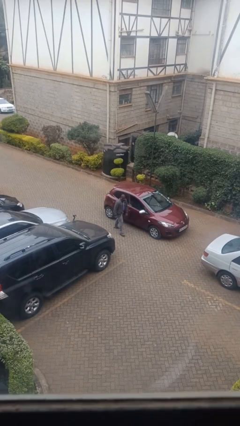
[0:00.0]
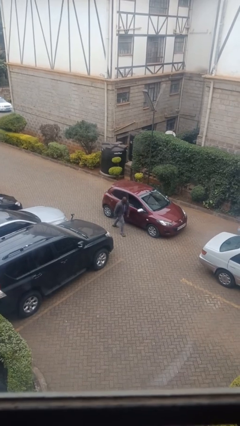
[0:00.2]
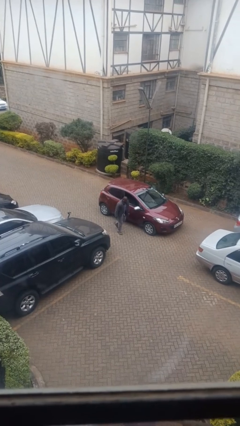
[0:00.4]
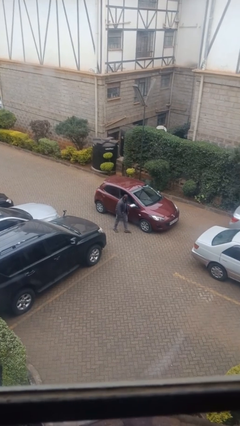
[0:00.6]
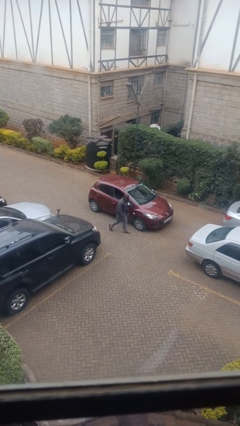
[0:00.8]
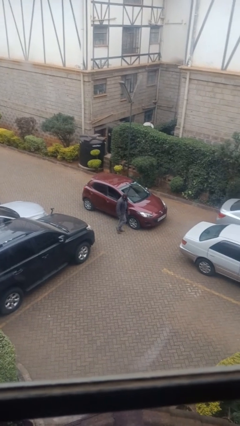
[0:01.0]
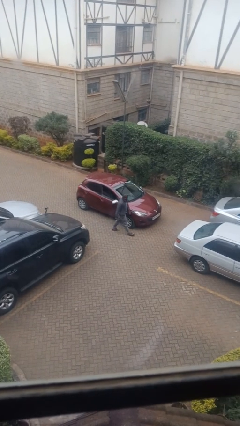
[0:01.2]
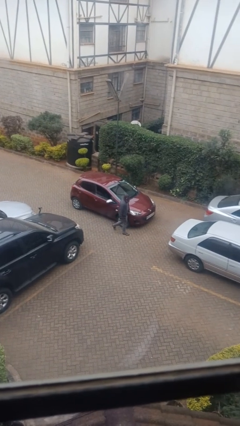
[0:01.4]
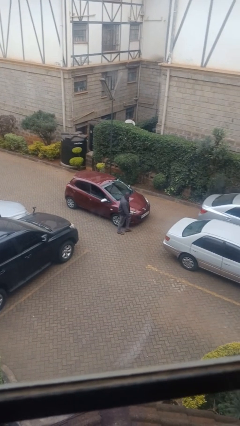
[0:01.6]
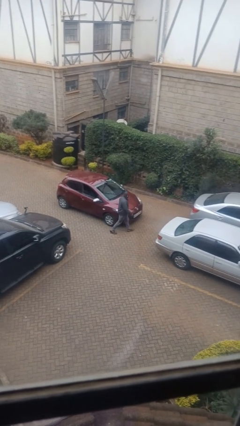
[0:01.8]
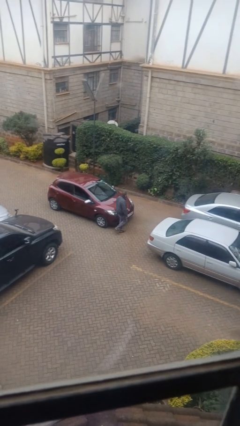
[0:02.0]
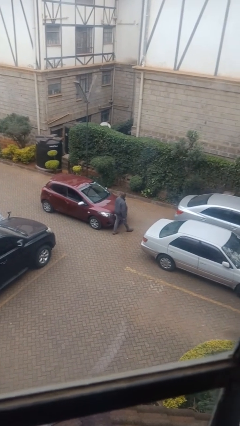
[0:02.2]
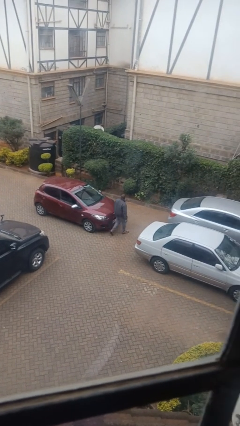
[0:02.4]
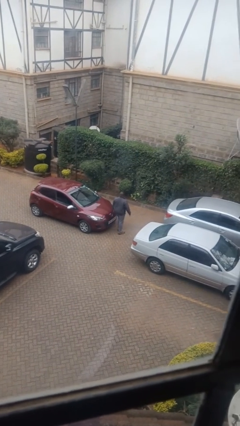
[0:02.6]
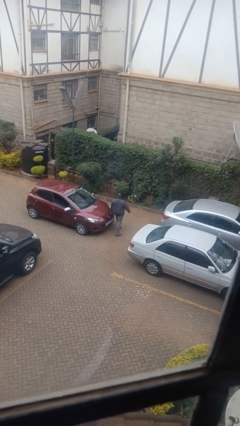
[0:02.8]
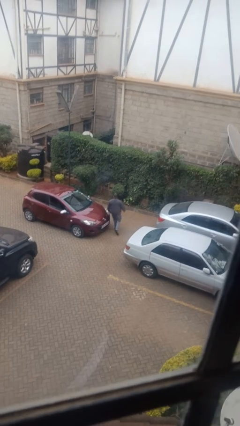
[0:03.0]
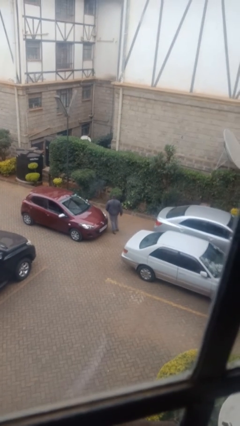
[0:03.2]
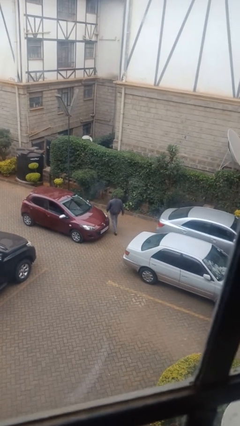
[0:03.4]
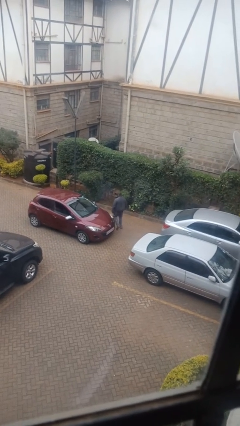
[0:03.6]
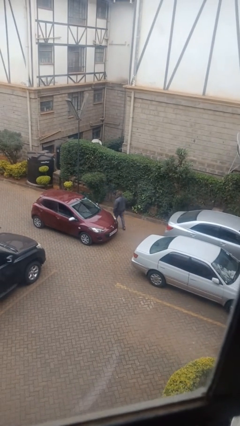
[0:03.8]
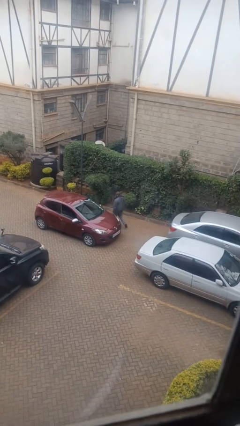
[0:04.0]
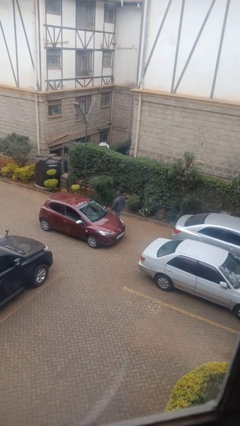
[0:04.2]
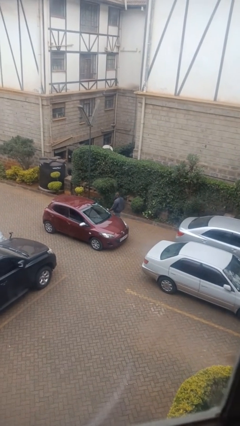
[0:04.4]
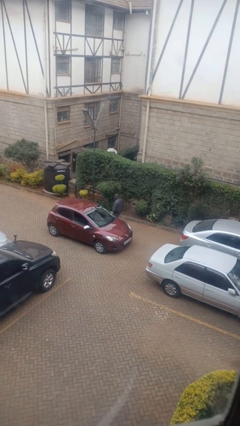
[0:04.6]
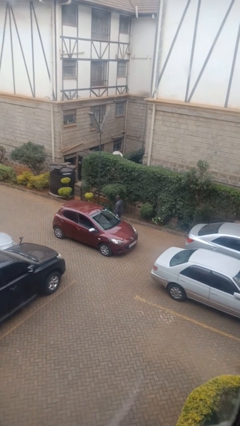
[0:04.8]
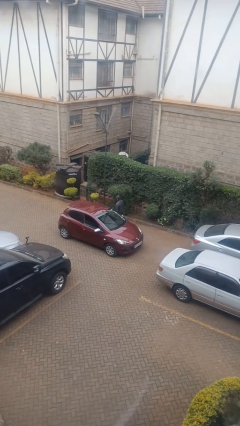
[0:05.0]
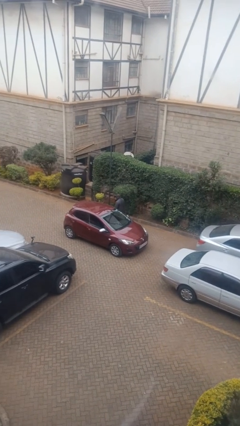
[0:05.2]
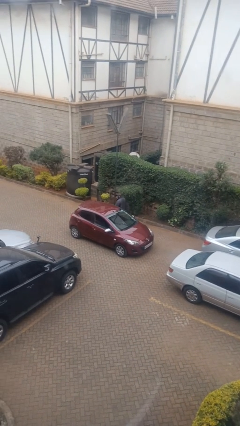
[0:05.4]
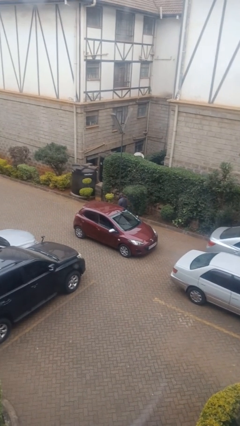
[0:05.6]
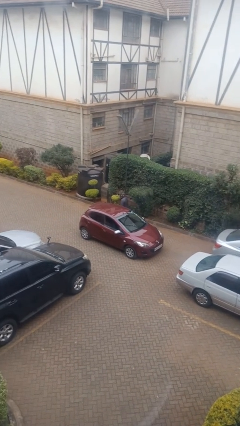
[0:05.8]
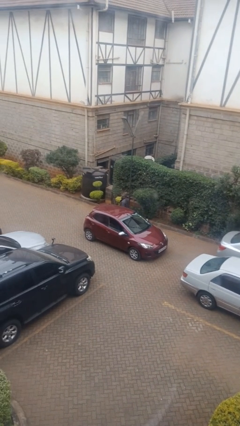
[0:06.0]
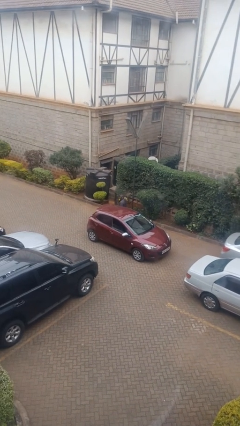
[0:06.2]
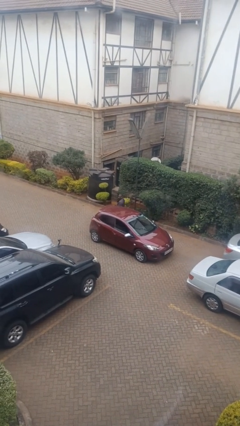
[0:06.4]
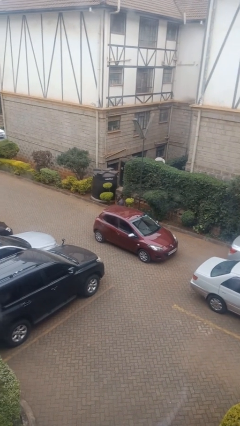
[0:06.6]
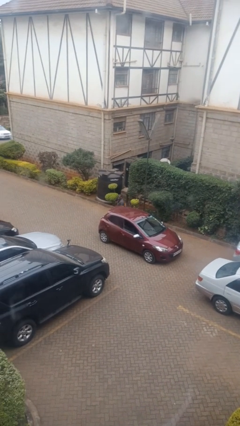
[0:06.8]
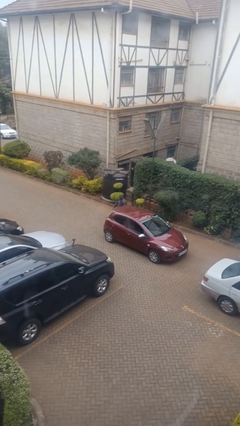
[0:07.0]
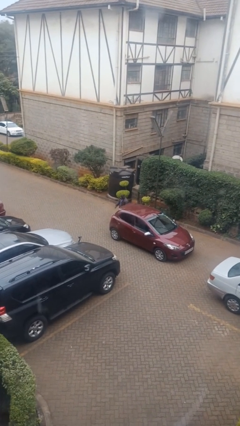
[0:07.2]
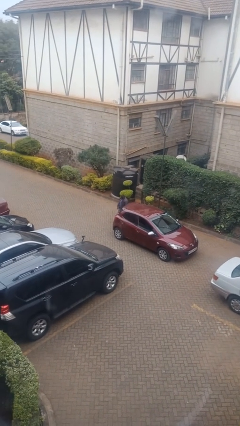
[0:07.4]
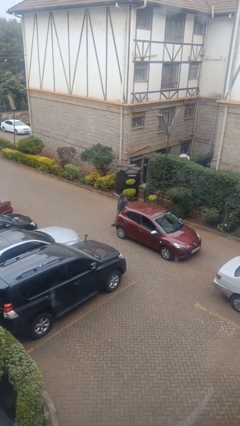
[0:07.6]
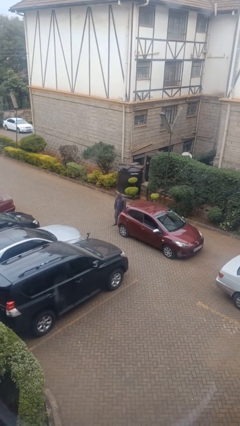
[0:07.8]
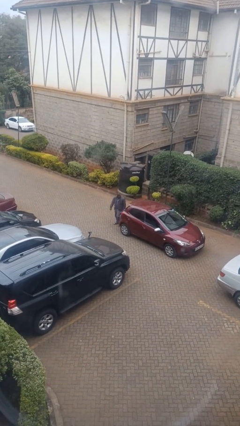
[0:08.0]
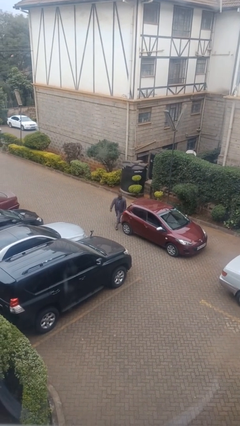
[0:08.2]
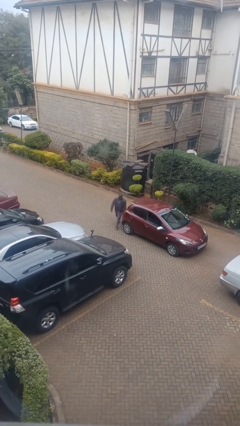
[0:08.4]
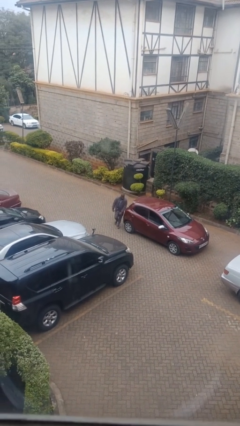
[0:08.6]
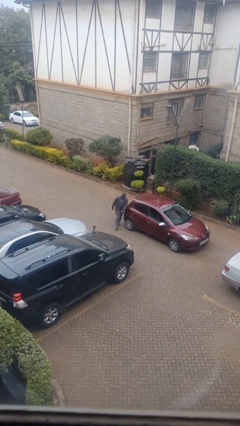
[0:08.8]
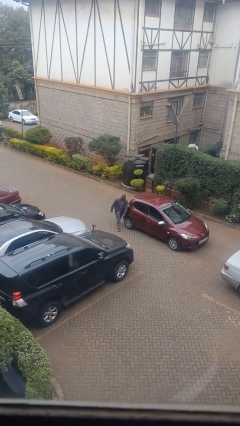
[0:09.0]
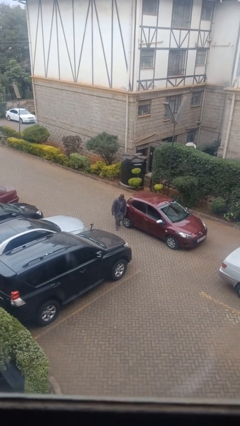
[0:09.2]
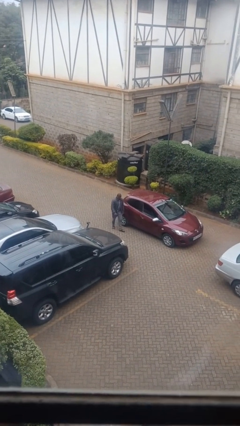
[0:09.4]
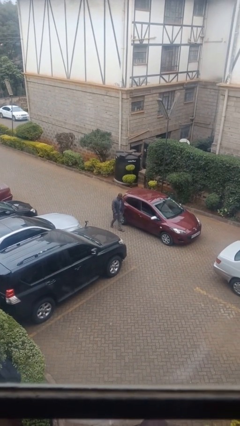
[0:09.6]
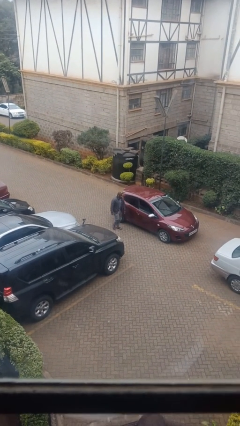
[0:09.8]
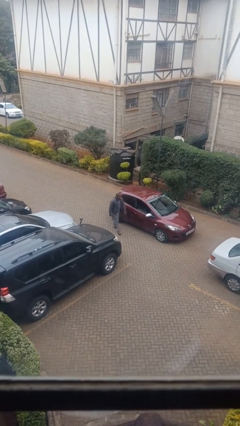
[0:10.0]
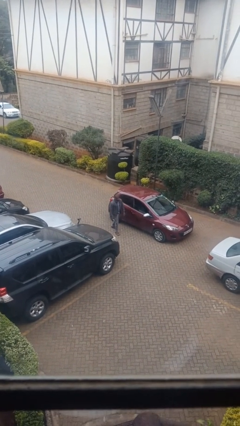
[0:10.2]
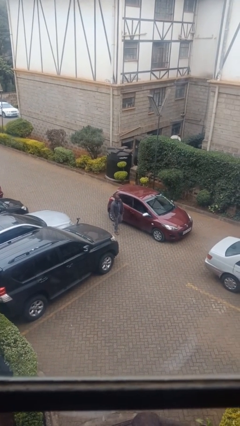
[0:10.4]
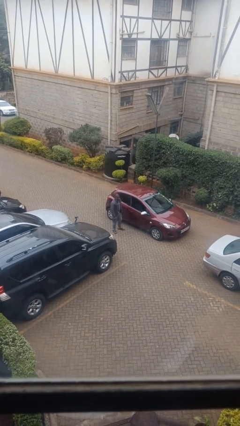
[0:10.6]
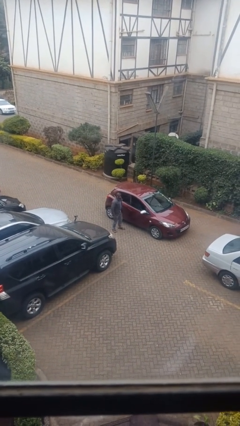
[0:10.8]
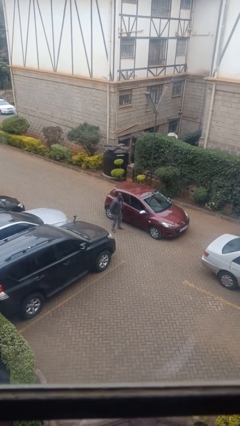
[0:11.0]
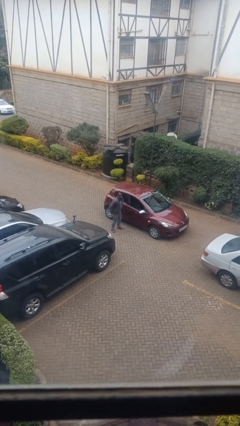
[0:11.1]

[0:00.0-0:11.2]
person walks around car

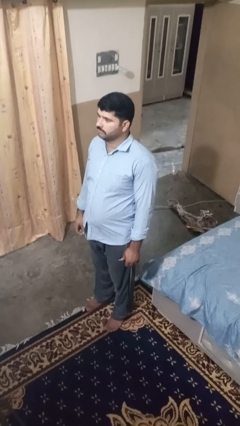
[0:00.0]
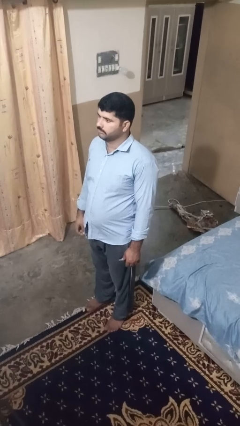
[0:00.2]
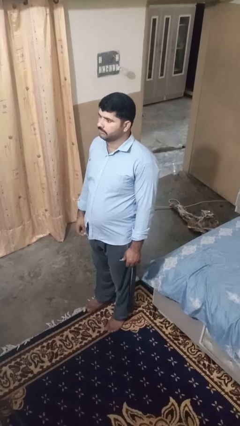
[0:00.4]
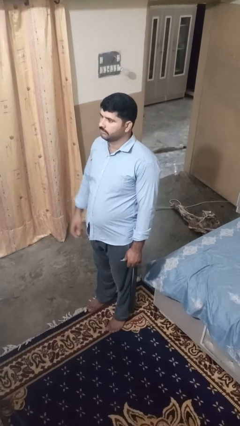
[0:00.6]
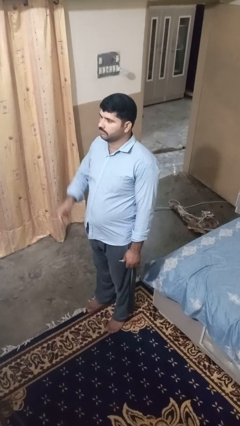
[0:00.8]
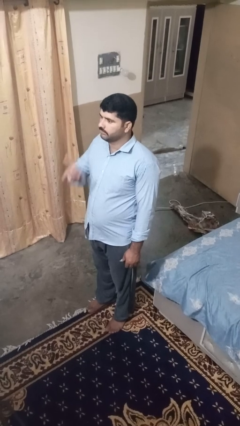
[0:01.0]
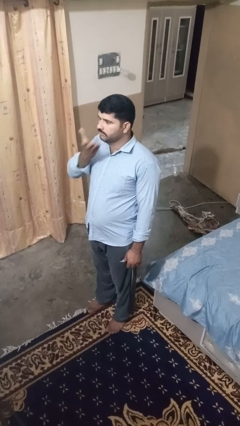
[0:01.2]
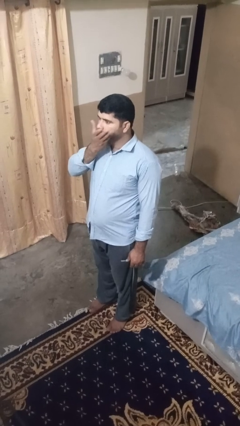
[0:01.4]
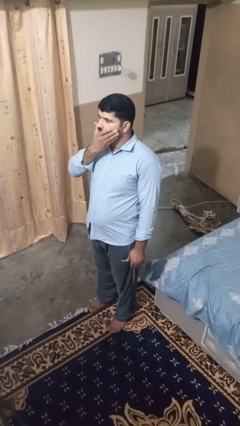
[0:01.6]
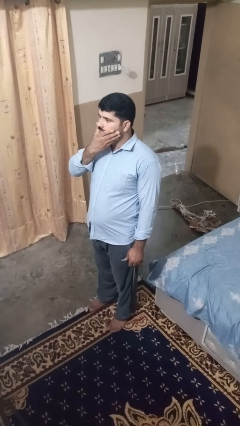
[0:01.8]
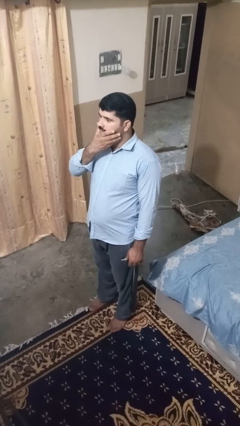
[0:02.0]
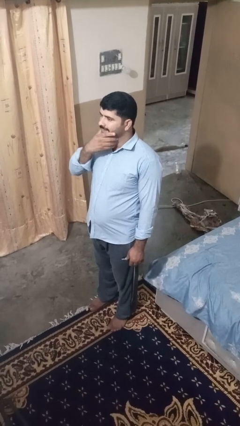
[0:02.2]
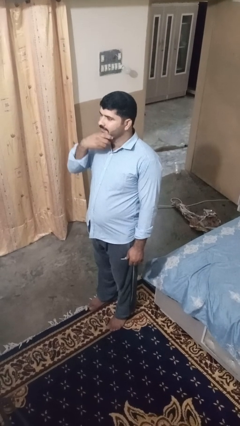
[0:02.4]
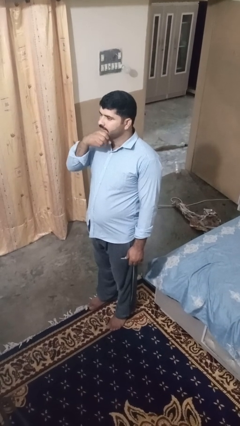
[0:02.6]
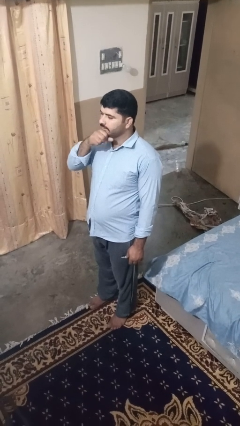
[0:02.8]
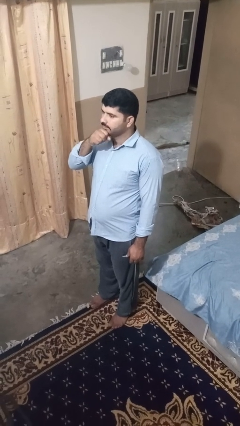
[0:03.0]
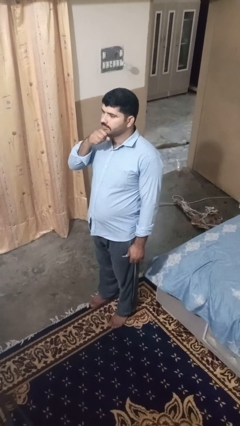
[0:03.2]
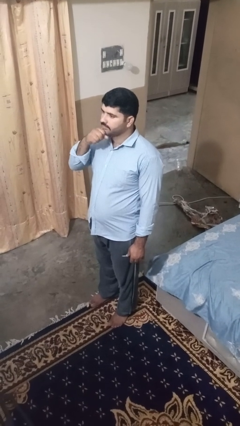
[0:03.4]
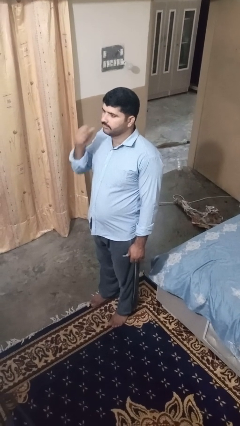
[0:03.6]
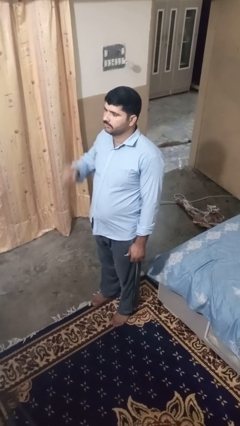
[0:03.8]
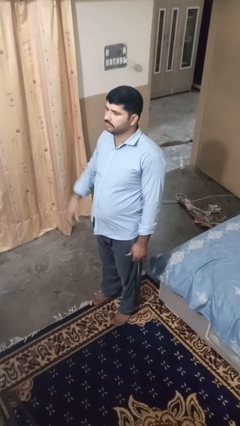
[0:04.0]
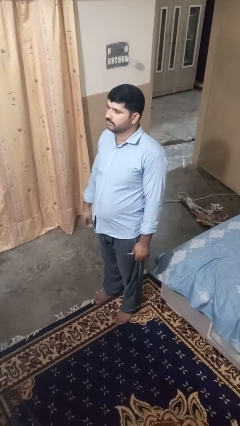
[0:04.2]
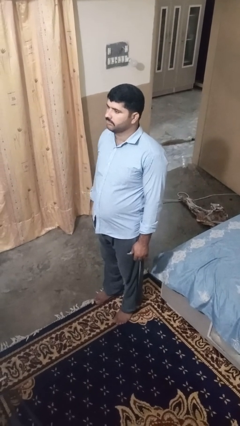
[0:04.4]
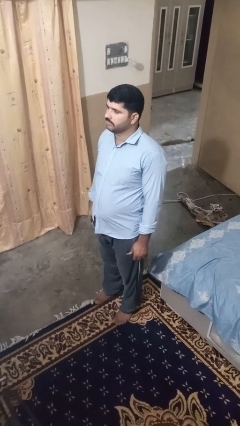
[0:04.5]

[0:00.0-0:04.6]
person strokes chin

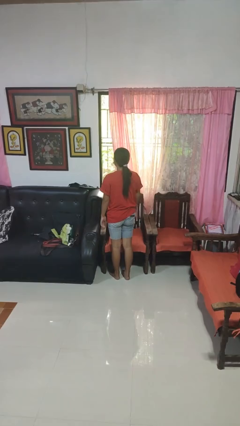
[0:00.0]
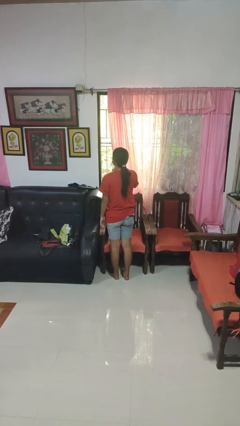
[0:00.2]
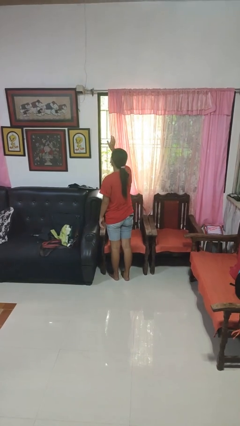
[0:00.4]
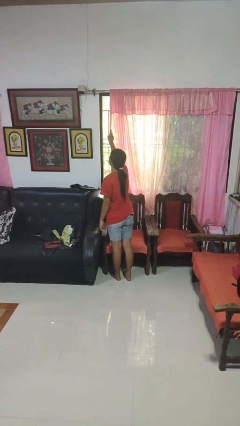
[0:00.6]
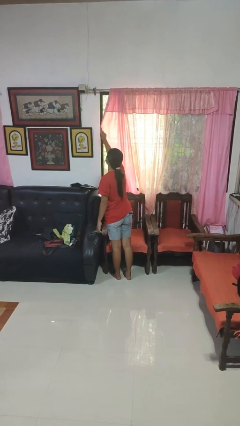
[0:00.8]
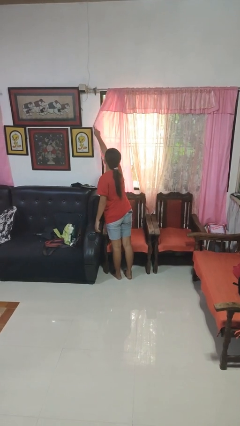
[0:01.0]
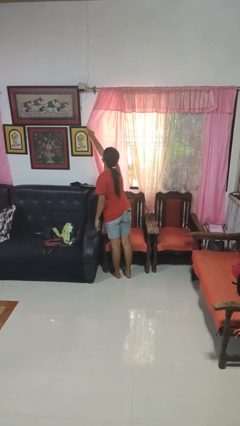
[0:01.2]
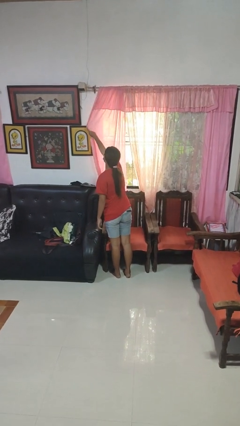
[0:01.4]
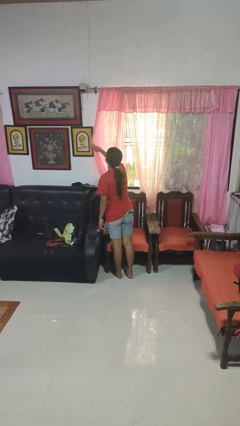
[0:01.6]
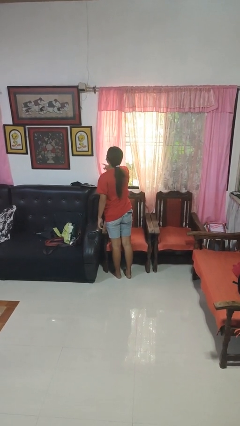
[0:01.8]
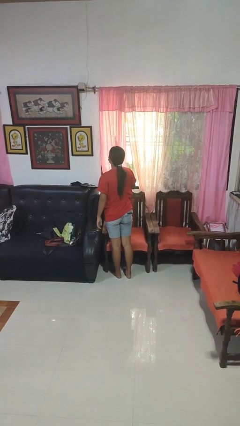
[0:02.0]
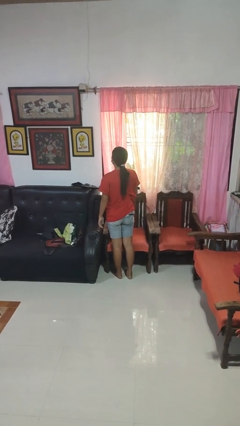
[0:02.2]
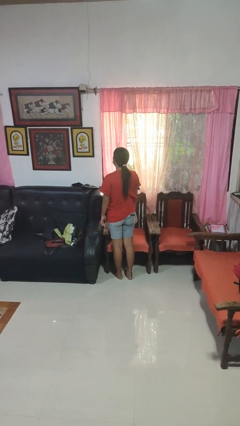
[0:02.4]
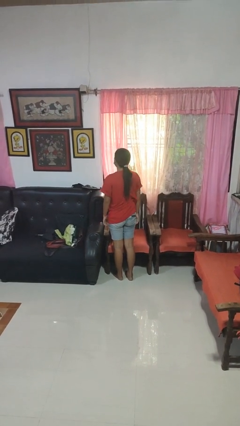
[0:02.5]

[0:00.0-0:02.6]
person closes curtains
